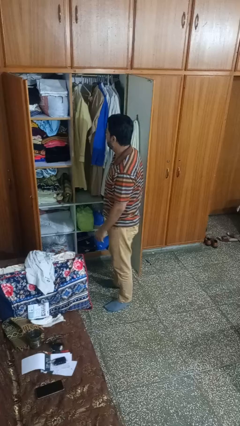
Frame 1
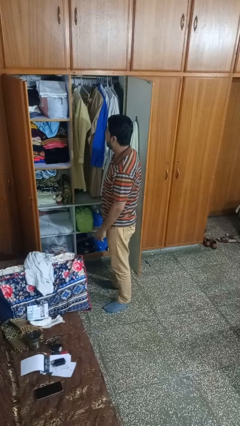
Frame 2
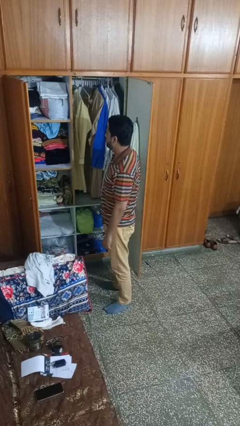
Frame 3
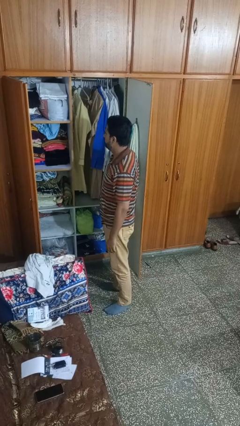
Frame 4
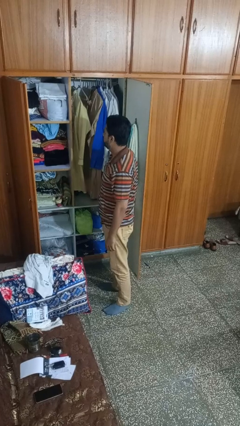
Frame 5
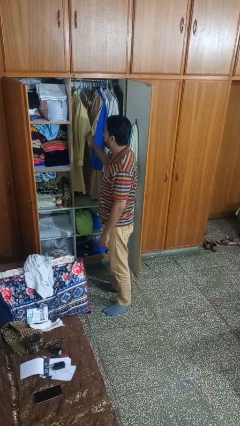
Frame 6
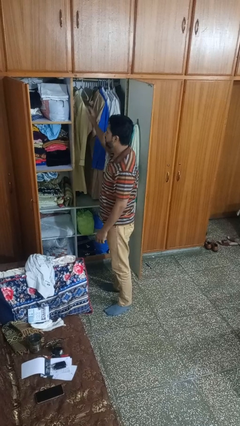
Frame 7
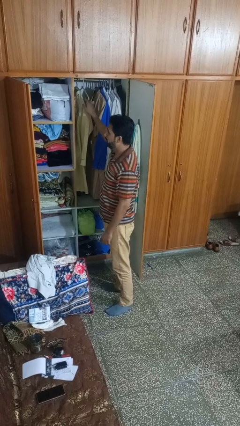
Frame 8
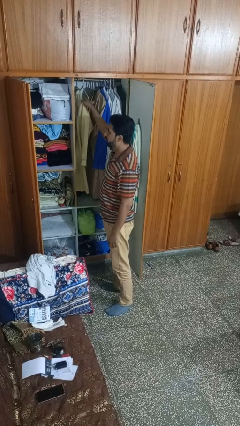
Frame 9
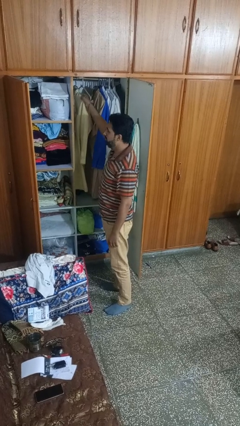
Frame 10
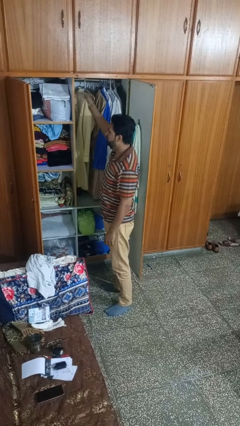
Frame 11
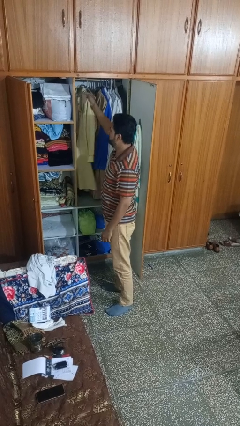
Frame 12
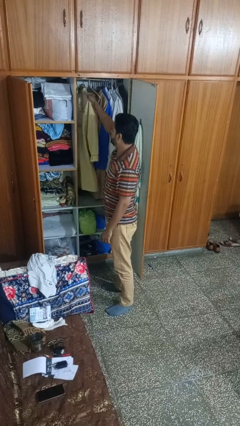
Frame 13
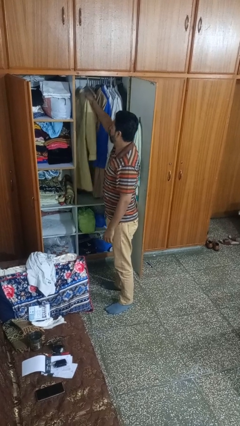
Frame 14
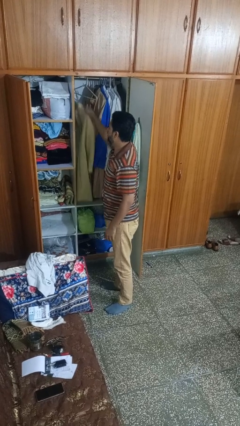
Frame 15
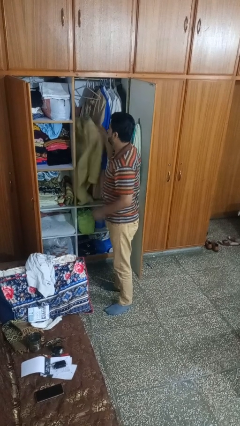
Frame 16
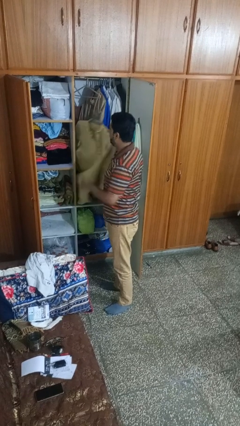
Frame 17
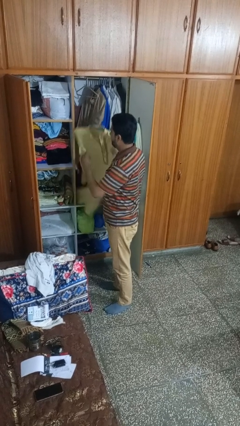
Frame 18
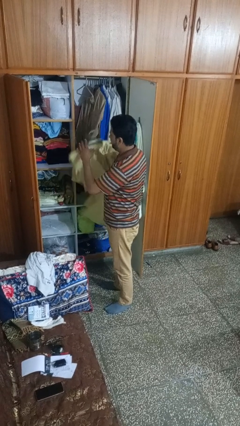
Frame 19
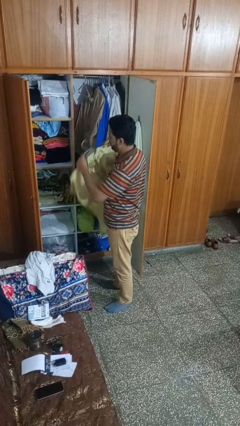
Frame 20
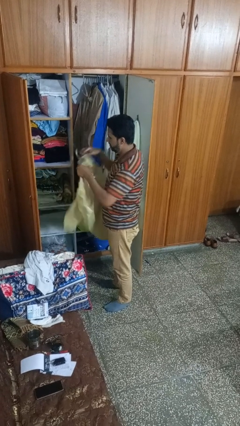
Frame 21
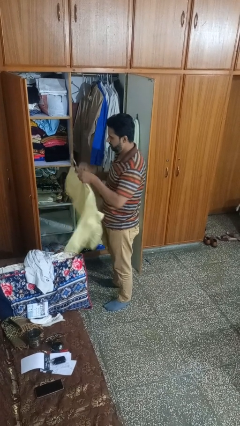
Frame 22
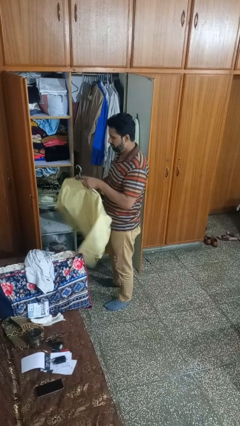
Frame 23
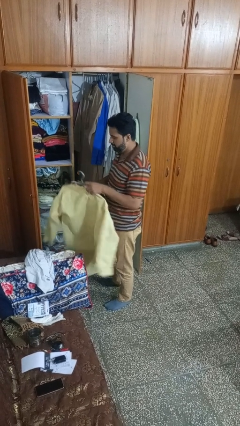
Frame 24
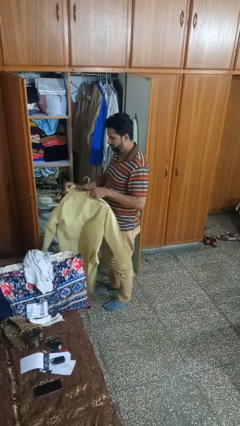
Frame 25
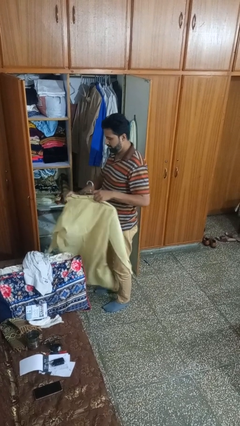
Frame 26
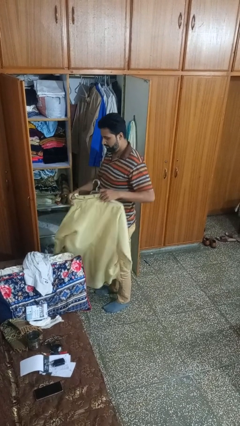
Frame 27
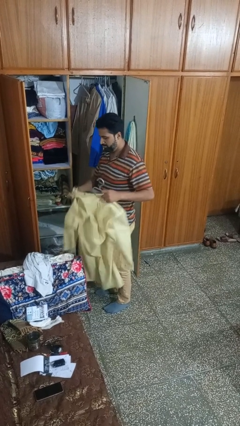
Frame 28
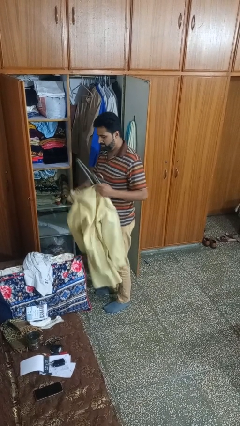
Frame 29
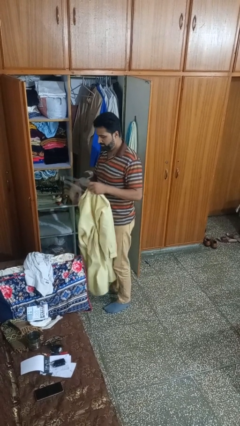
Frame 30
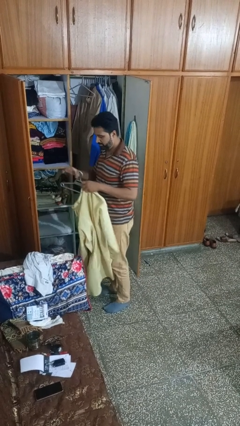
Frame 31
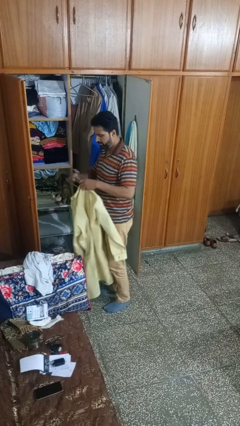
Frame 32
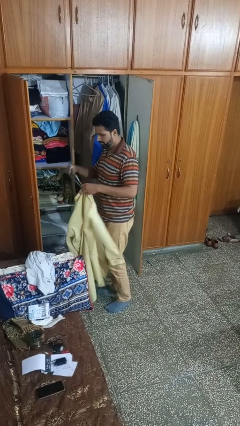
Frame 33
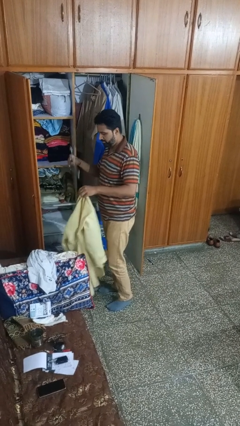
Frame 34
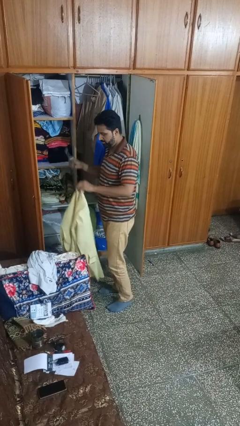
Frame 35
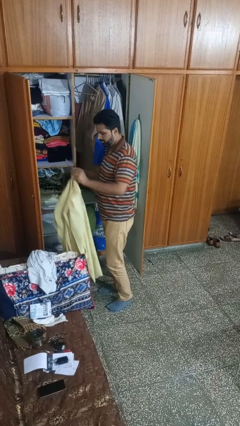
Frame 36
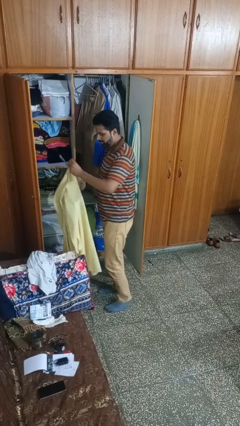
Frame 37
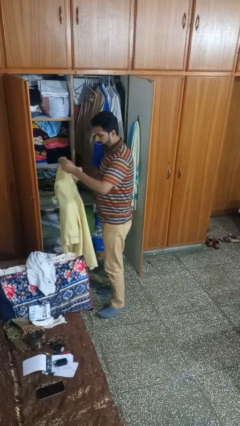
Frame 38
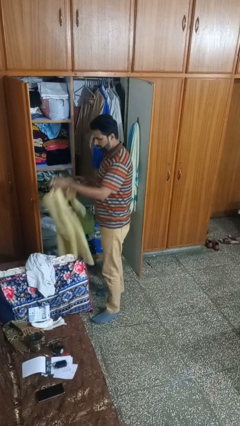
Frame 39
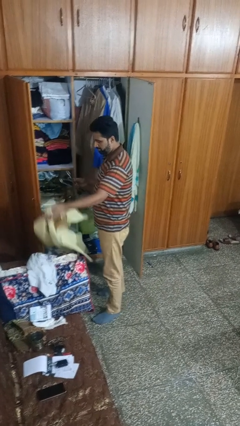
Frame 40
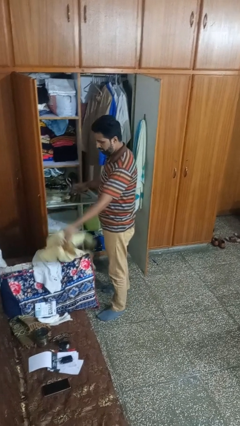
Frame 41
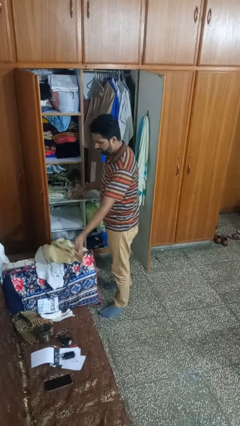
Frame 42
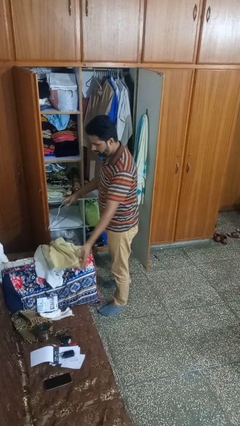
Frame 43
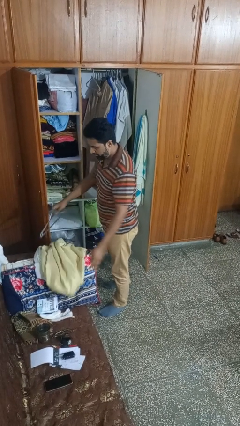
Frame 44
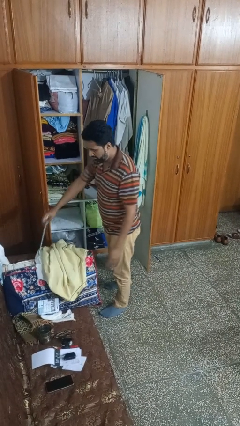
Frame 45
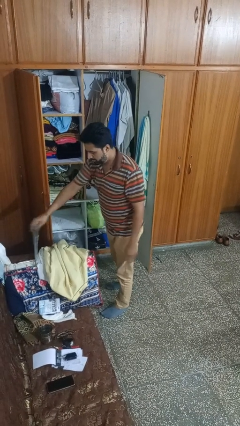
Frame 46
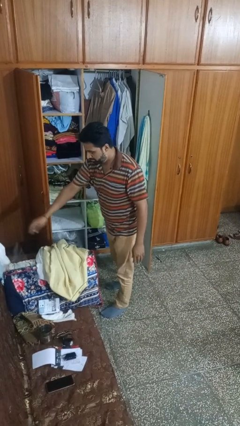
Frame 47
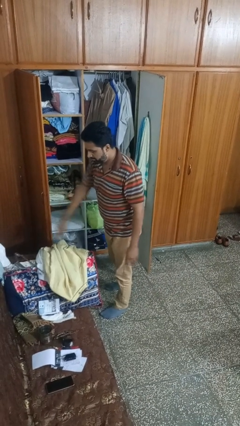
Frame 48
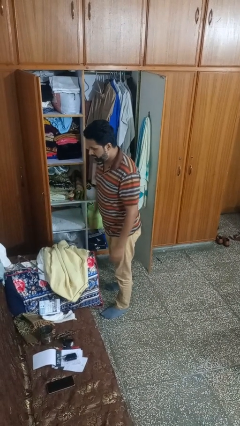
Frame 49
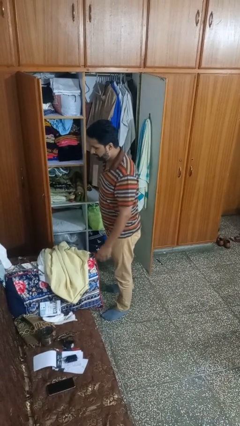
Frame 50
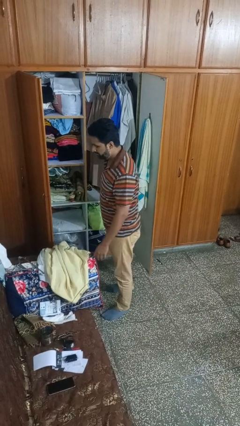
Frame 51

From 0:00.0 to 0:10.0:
person takes clothes from closet

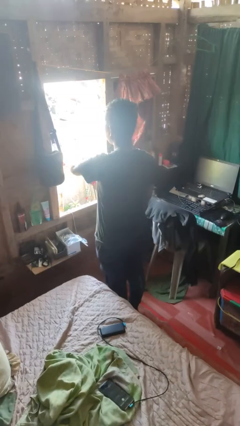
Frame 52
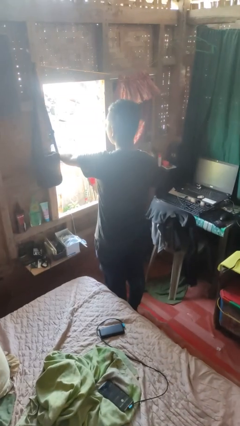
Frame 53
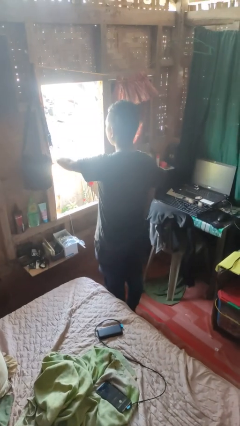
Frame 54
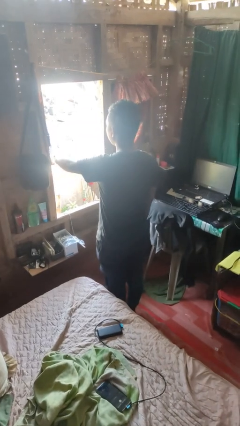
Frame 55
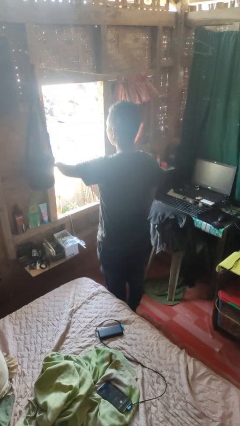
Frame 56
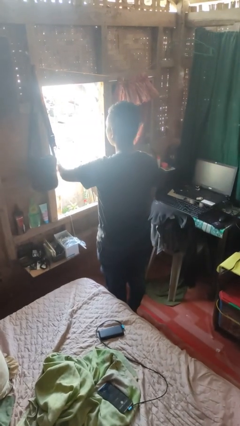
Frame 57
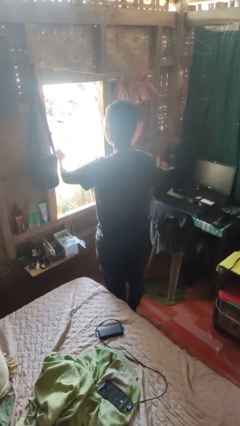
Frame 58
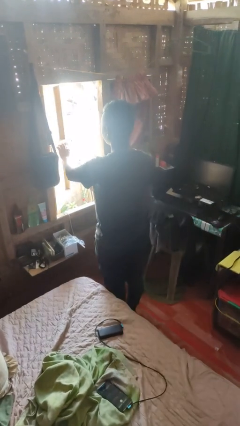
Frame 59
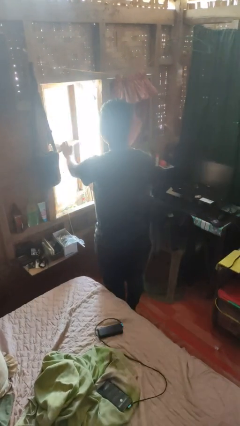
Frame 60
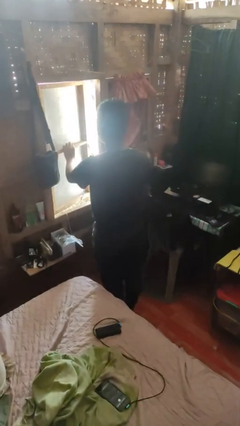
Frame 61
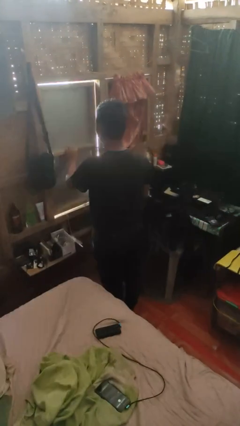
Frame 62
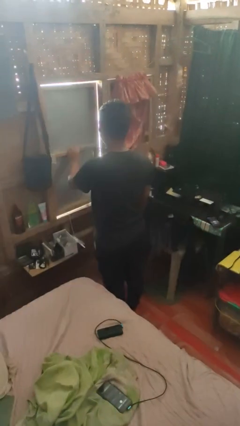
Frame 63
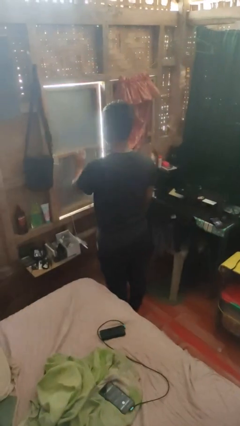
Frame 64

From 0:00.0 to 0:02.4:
person closes home window

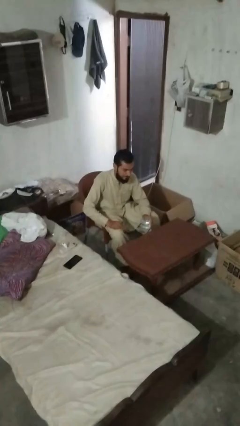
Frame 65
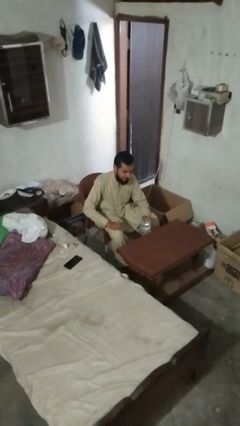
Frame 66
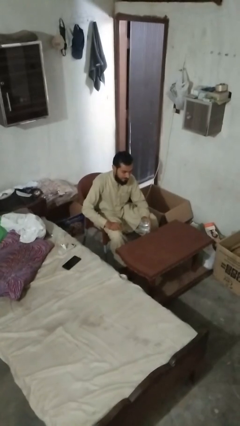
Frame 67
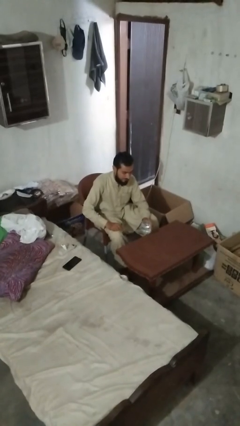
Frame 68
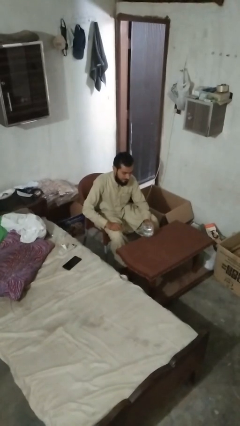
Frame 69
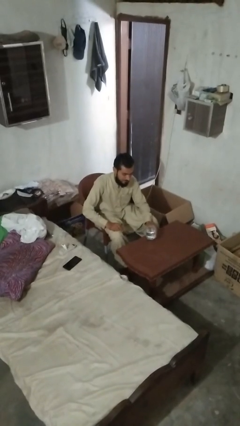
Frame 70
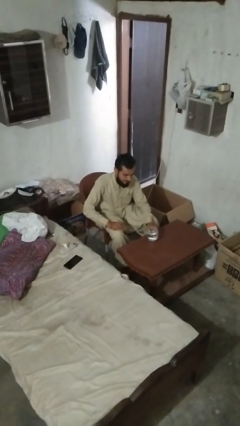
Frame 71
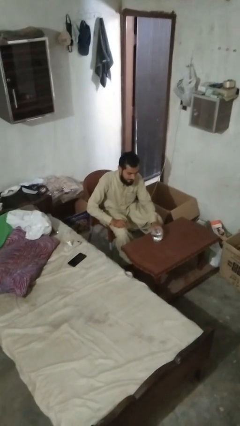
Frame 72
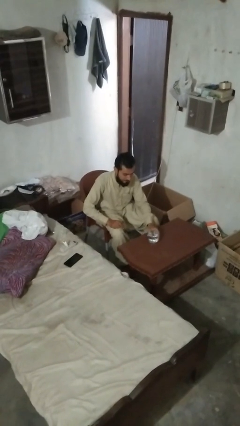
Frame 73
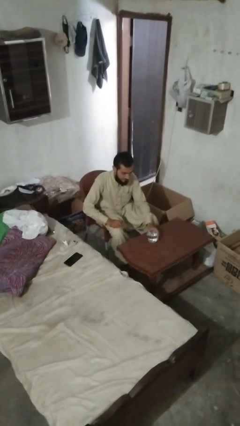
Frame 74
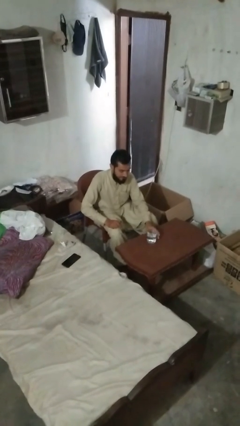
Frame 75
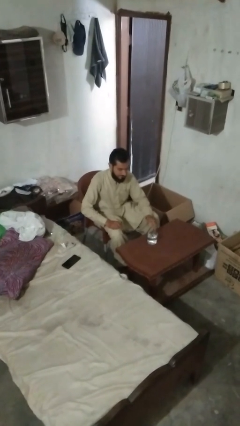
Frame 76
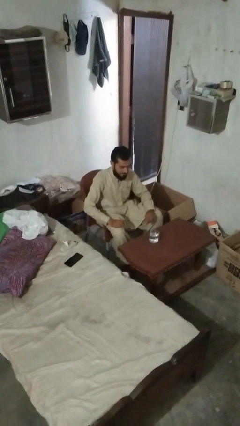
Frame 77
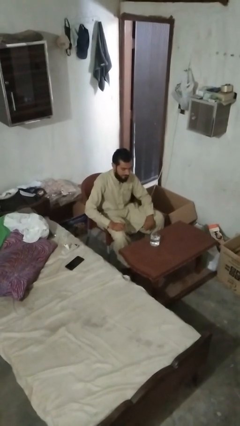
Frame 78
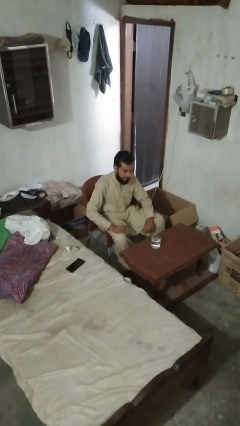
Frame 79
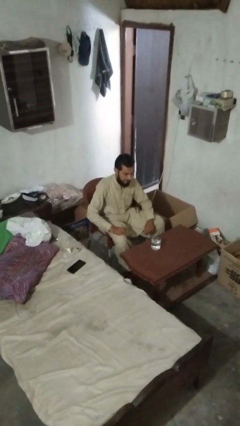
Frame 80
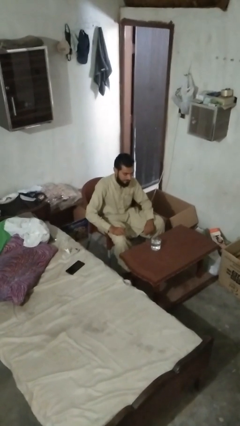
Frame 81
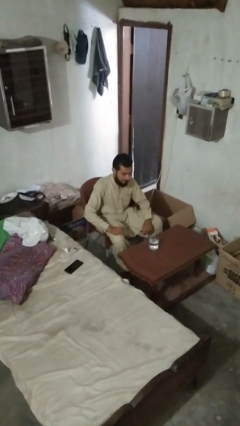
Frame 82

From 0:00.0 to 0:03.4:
person sets upright glass

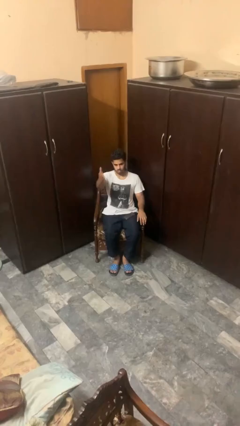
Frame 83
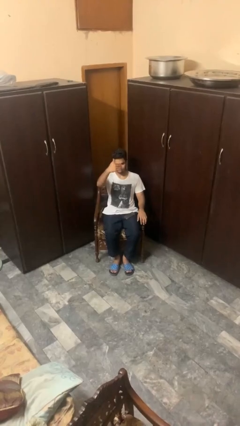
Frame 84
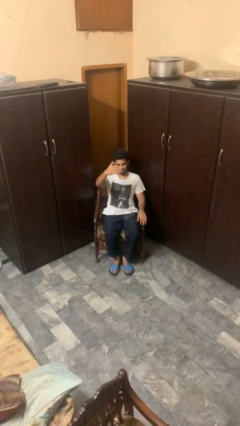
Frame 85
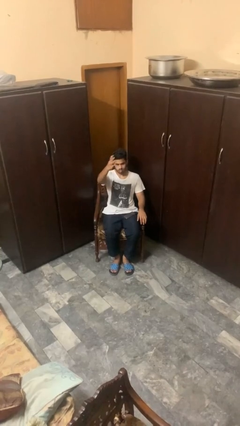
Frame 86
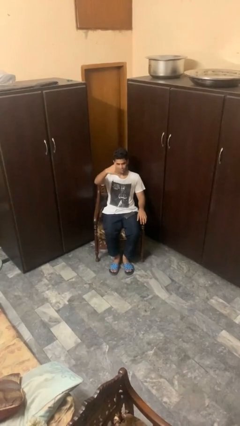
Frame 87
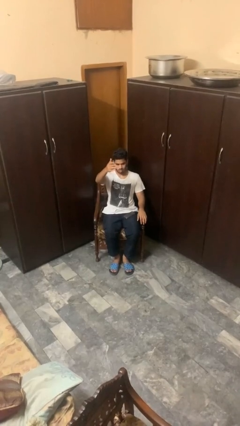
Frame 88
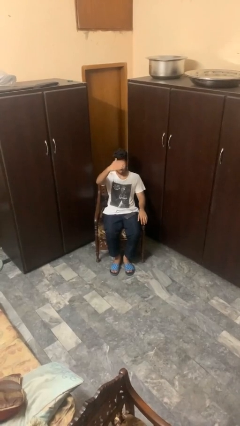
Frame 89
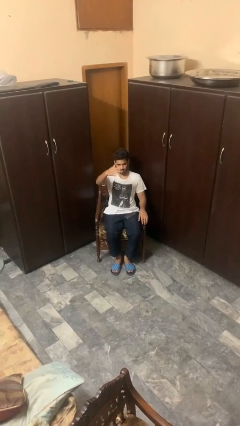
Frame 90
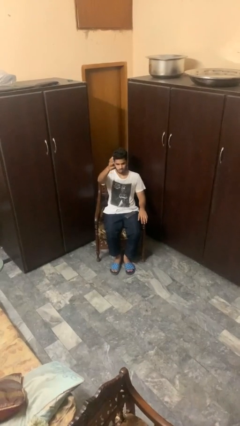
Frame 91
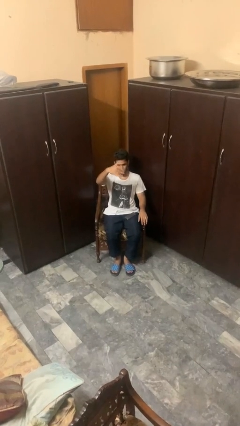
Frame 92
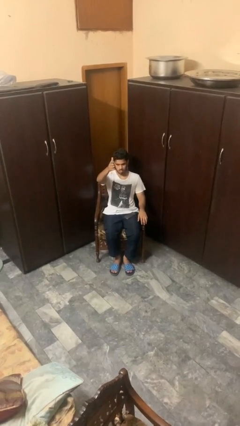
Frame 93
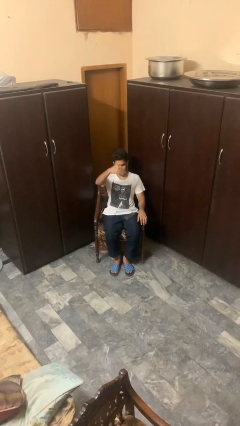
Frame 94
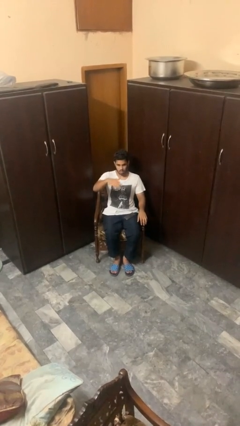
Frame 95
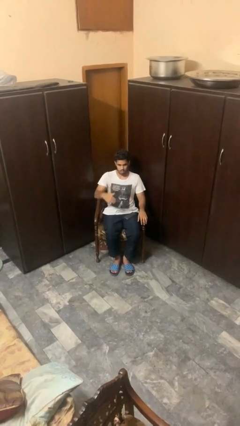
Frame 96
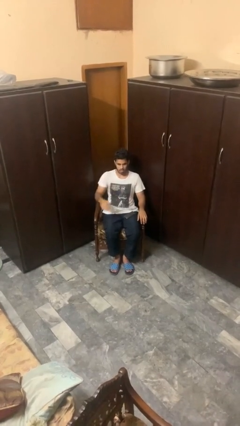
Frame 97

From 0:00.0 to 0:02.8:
person gestures come here
